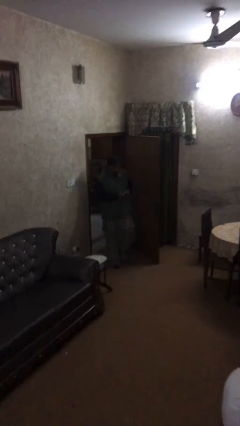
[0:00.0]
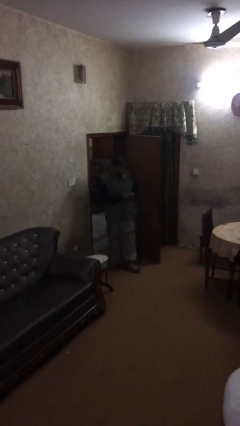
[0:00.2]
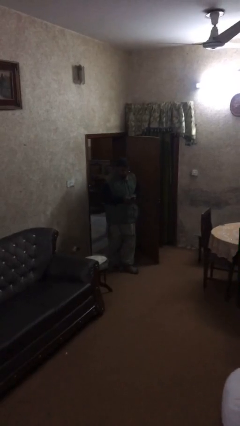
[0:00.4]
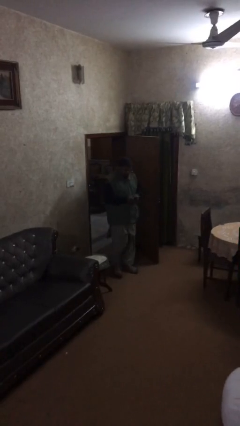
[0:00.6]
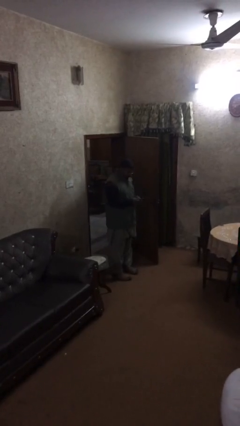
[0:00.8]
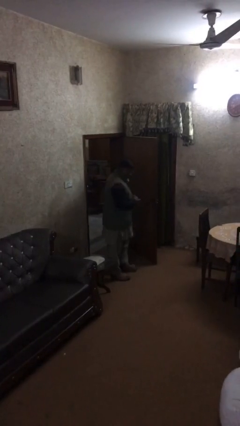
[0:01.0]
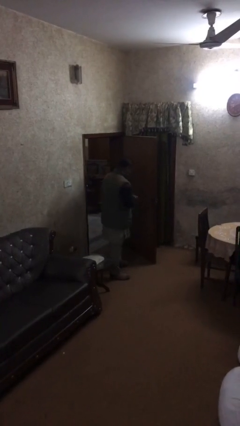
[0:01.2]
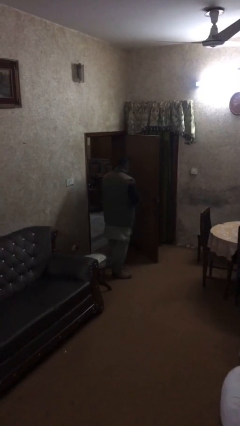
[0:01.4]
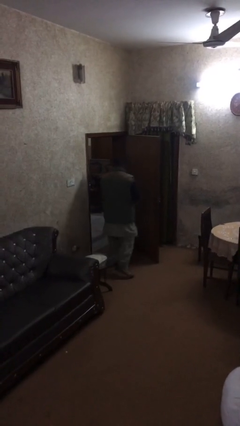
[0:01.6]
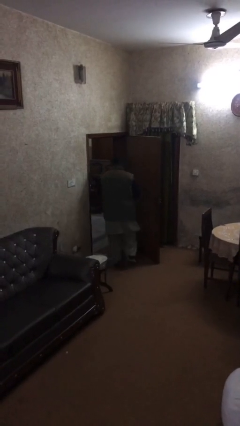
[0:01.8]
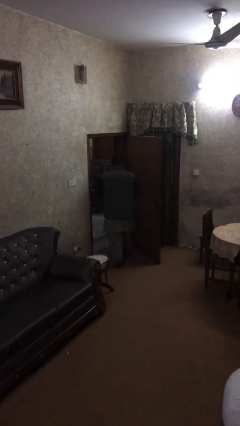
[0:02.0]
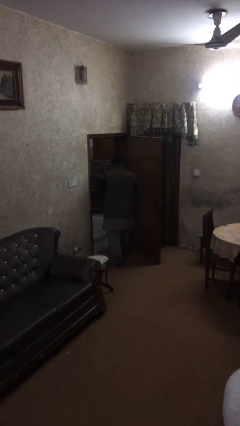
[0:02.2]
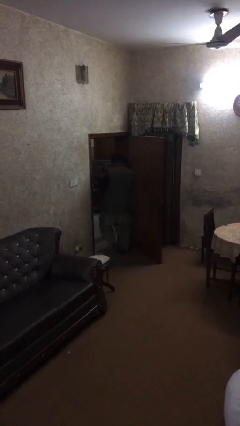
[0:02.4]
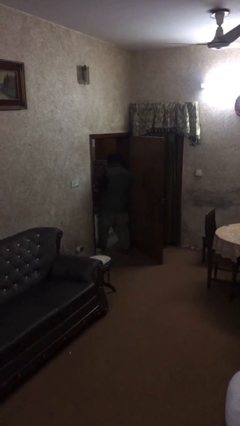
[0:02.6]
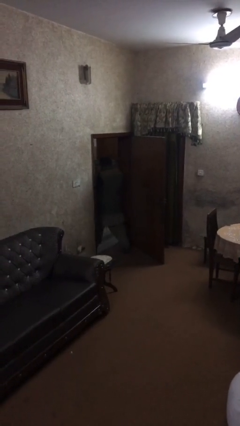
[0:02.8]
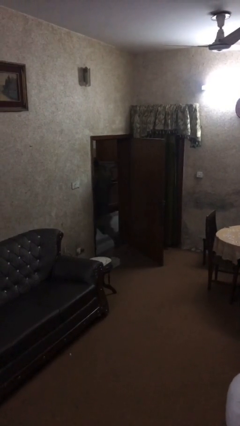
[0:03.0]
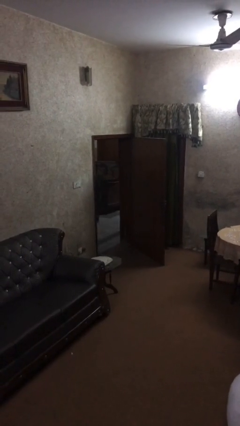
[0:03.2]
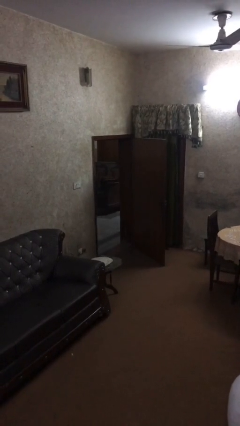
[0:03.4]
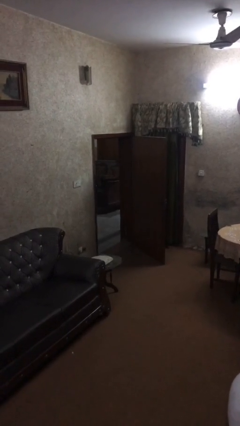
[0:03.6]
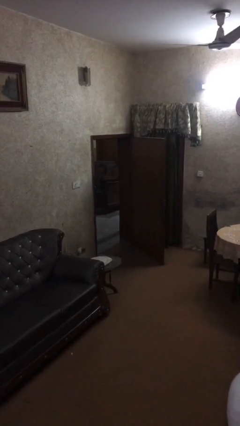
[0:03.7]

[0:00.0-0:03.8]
person exits scene through structure

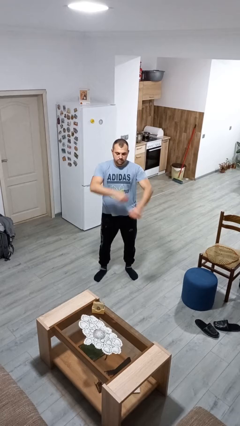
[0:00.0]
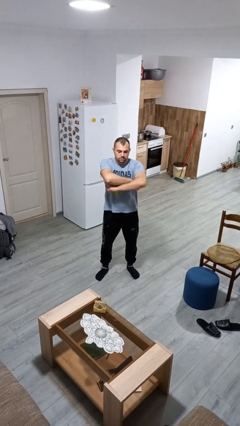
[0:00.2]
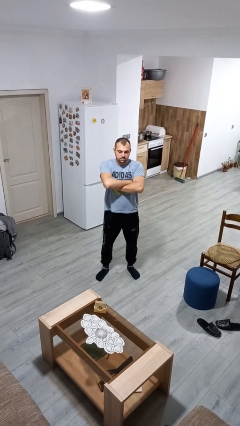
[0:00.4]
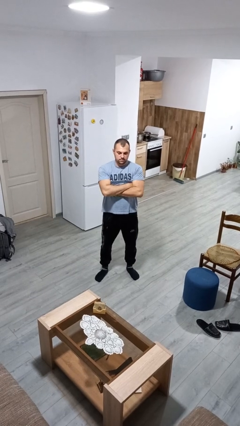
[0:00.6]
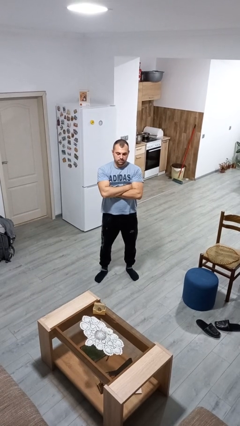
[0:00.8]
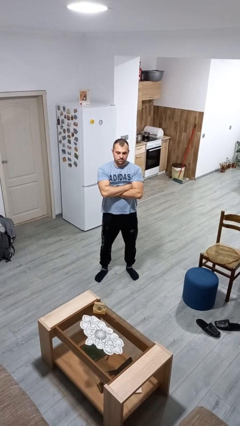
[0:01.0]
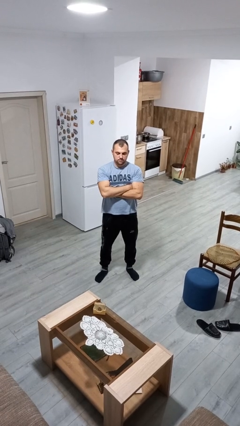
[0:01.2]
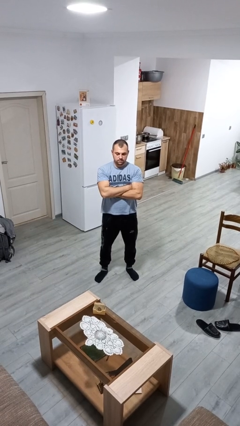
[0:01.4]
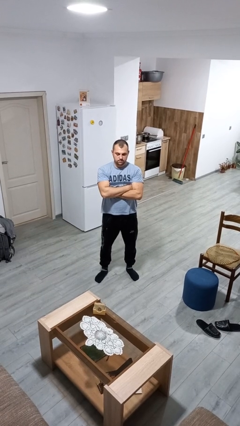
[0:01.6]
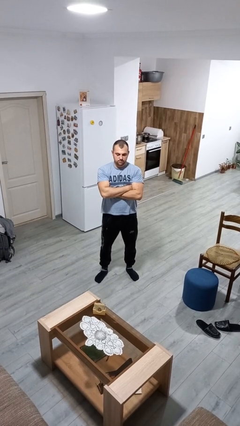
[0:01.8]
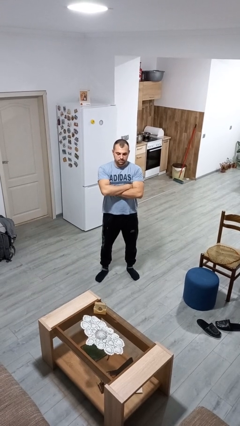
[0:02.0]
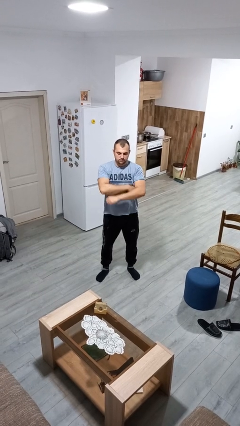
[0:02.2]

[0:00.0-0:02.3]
person crosses arms

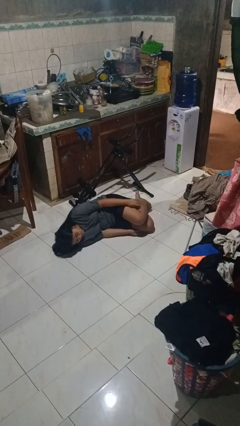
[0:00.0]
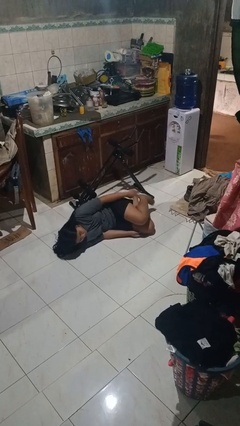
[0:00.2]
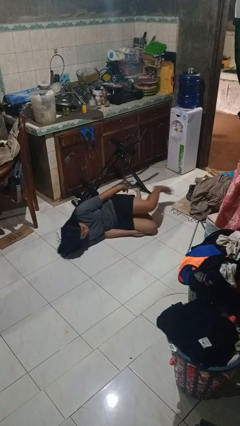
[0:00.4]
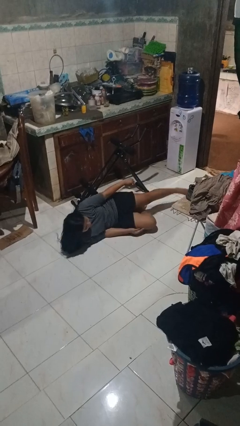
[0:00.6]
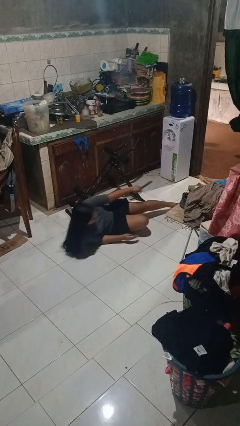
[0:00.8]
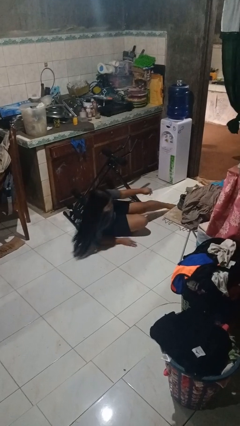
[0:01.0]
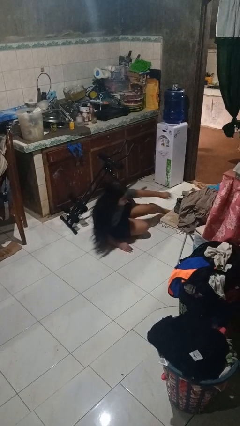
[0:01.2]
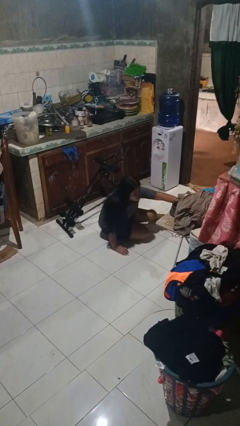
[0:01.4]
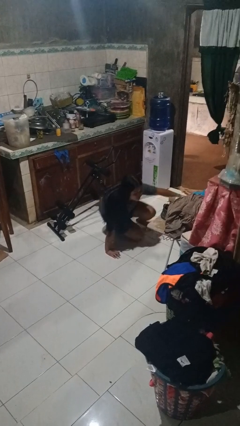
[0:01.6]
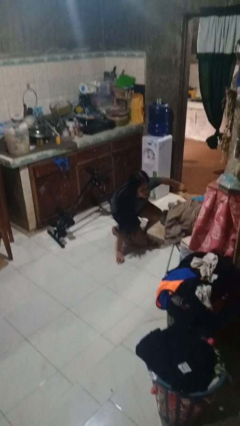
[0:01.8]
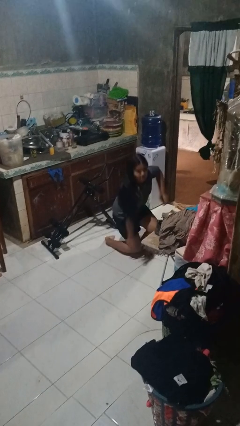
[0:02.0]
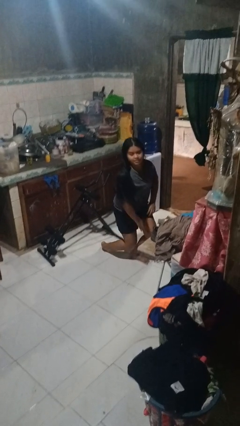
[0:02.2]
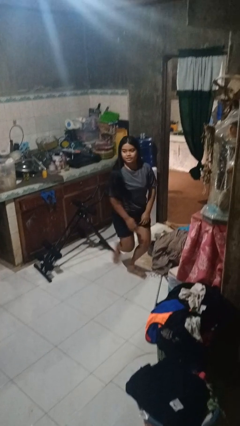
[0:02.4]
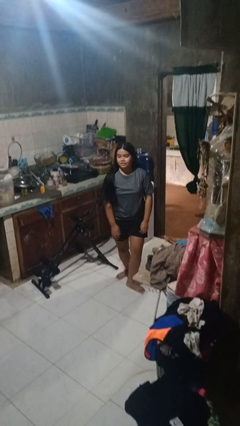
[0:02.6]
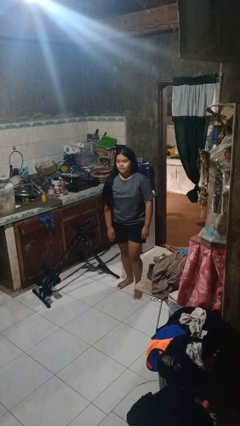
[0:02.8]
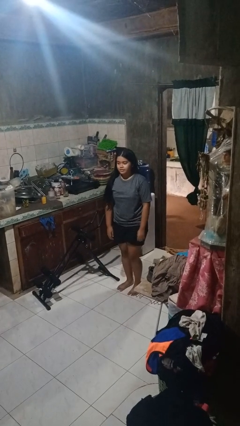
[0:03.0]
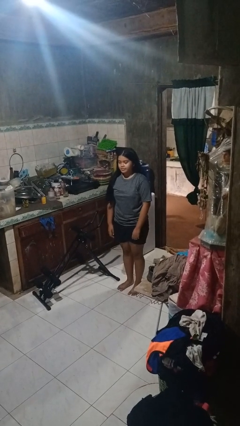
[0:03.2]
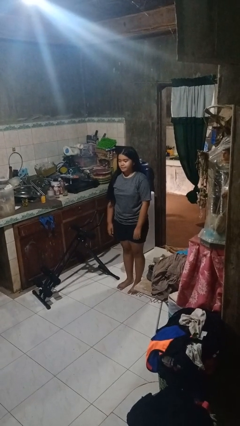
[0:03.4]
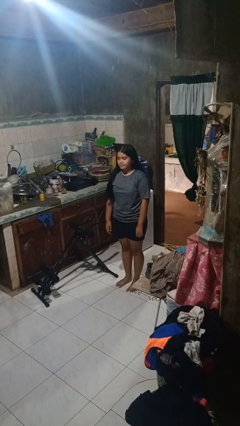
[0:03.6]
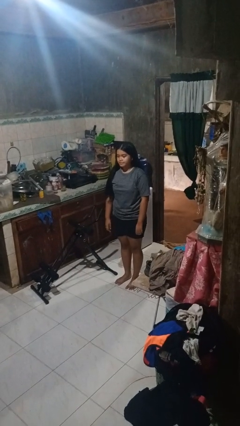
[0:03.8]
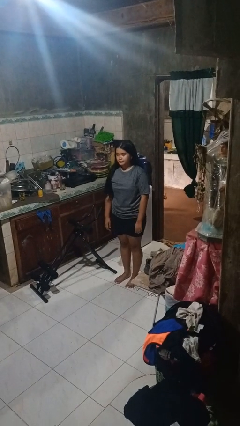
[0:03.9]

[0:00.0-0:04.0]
person stands up from floor

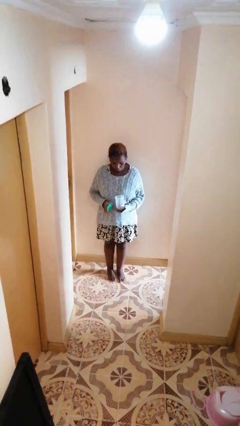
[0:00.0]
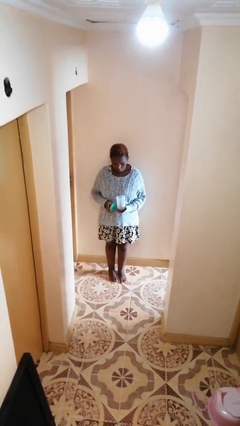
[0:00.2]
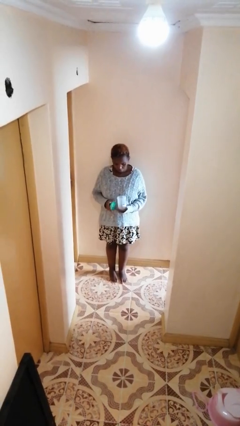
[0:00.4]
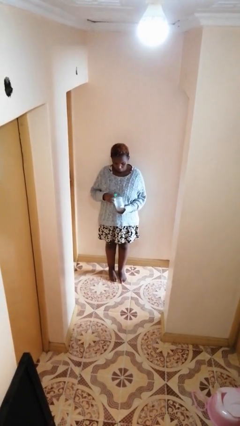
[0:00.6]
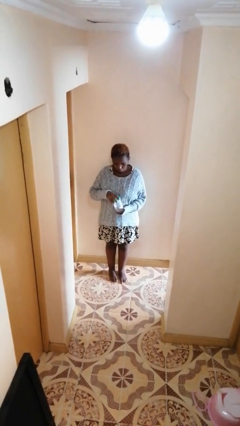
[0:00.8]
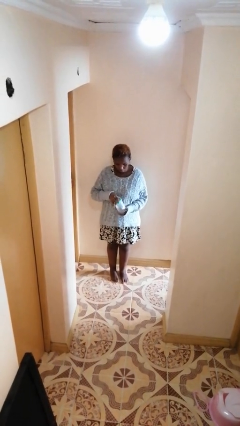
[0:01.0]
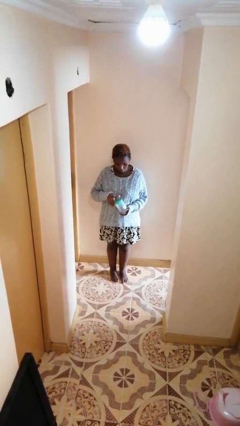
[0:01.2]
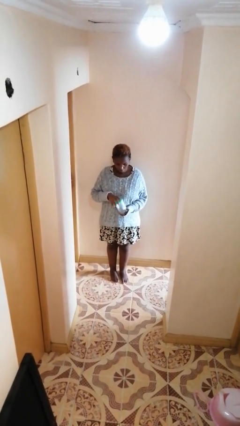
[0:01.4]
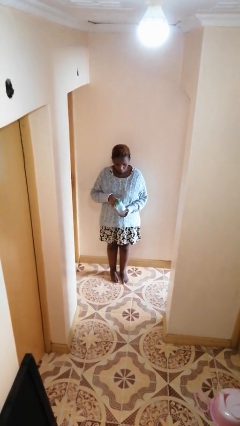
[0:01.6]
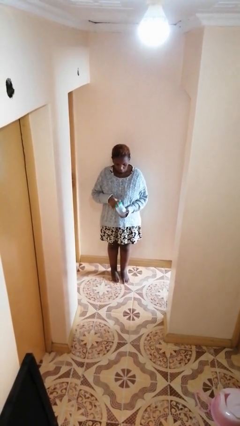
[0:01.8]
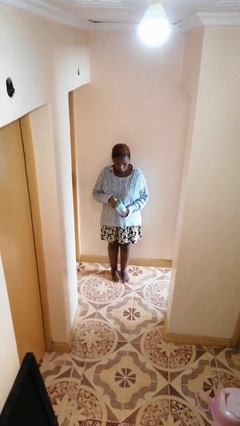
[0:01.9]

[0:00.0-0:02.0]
person closes jar

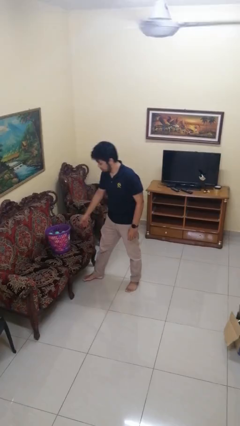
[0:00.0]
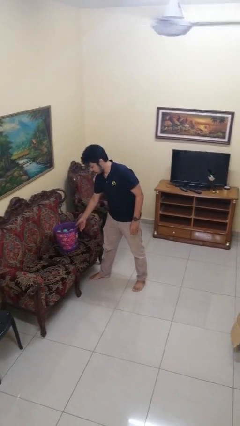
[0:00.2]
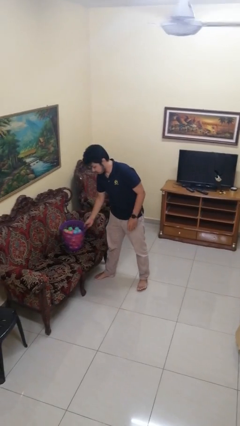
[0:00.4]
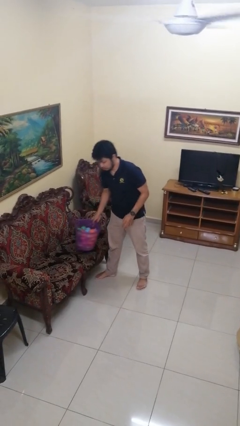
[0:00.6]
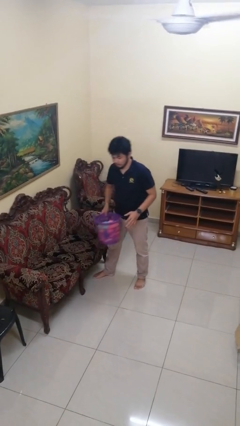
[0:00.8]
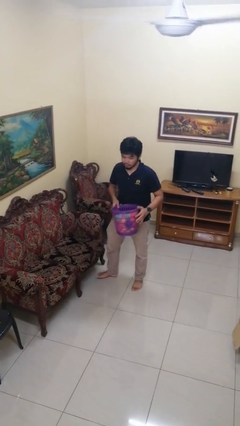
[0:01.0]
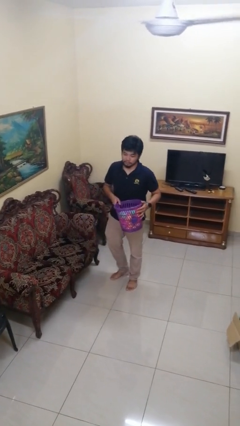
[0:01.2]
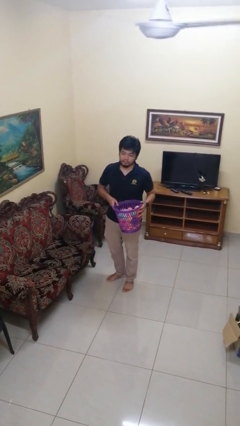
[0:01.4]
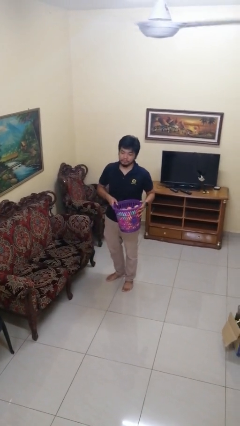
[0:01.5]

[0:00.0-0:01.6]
person picks up object from couch

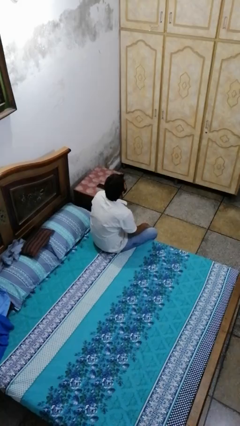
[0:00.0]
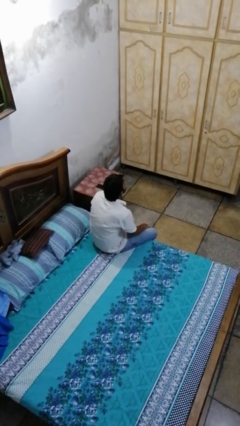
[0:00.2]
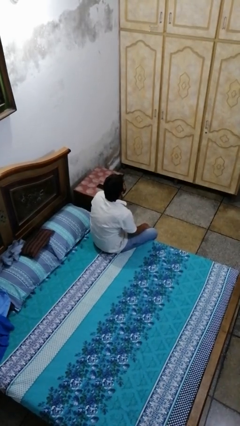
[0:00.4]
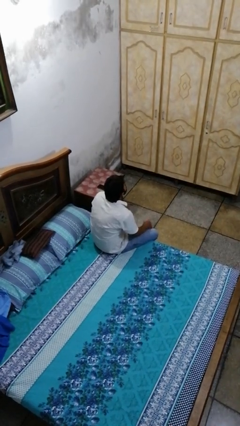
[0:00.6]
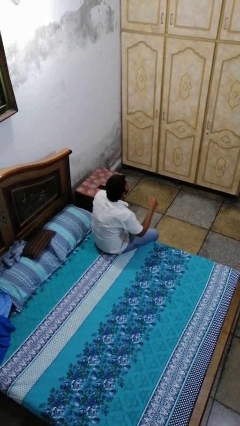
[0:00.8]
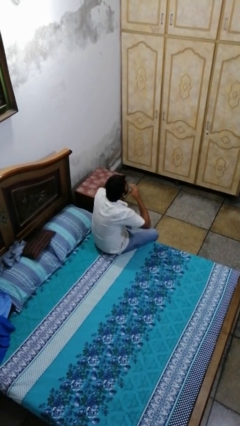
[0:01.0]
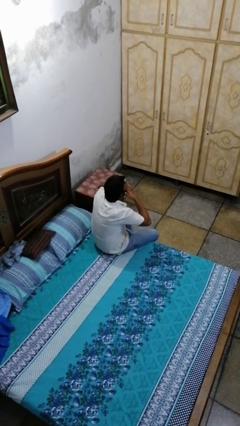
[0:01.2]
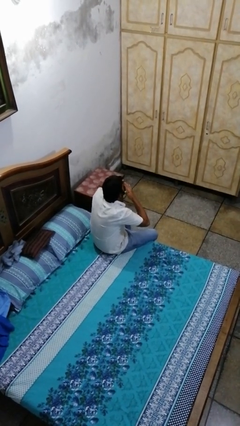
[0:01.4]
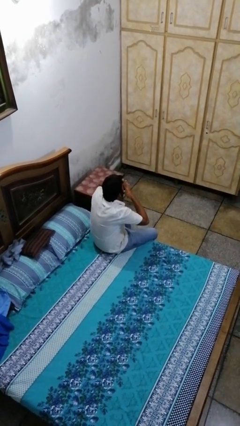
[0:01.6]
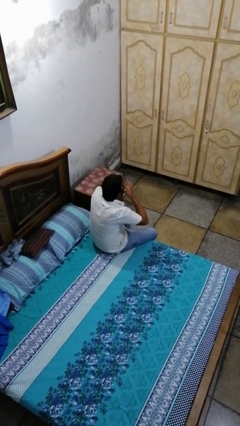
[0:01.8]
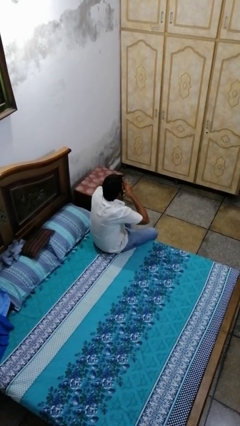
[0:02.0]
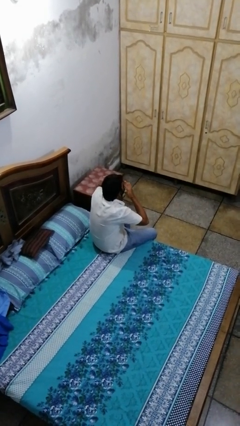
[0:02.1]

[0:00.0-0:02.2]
person rubs eyes

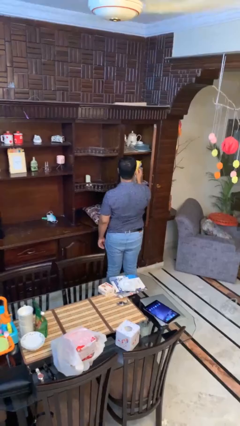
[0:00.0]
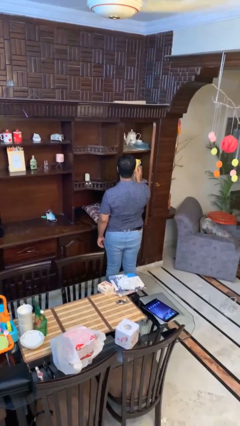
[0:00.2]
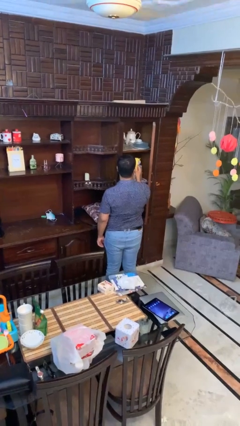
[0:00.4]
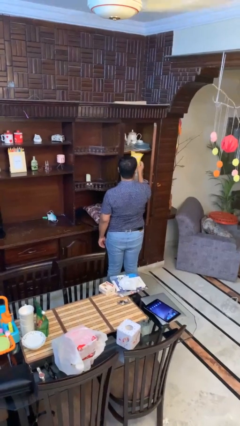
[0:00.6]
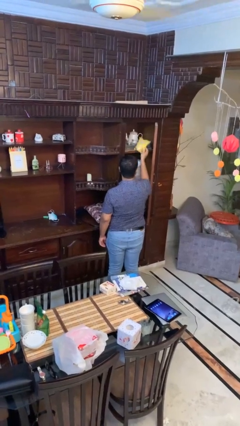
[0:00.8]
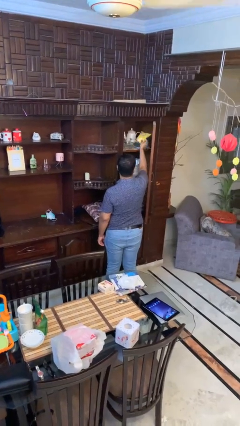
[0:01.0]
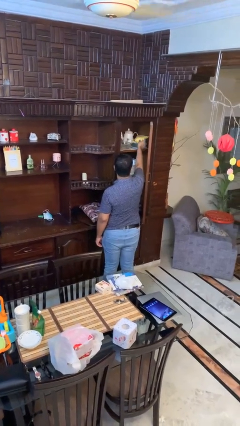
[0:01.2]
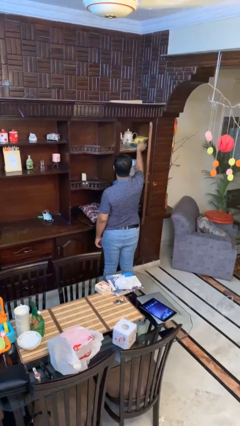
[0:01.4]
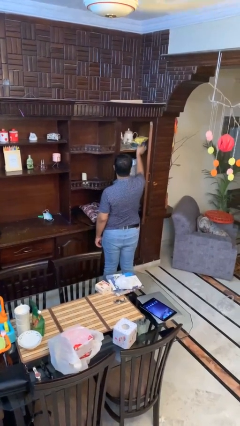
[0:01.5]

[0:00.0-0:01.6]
person puts down object into cabinet
